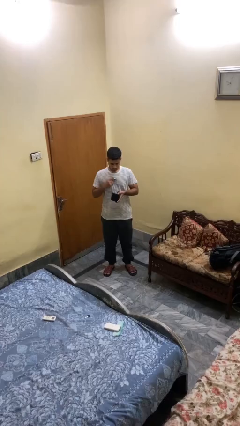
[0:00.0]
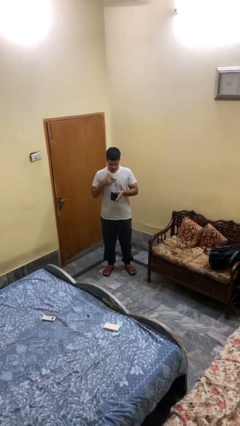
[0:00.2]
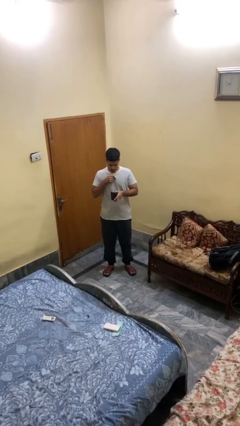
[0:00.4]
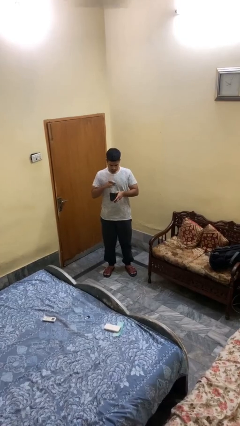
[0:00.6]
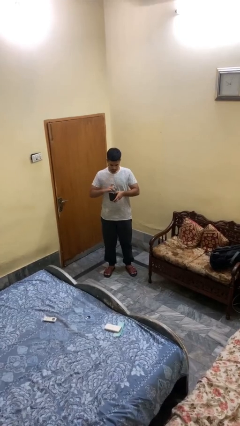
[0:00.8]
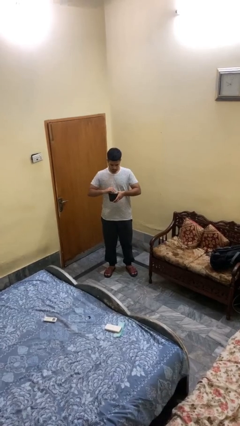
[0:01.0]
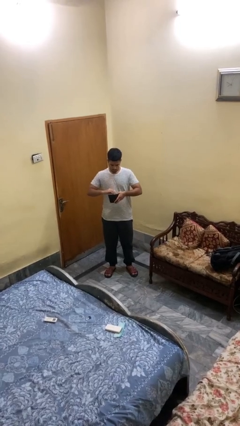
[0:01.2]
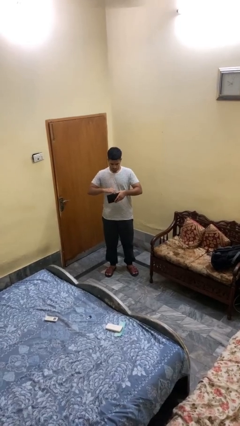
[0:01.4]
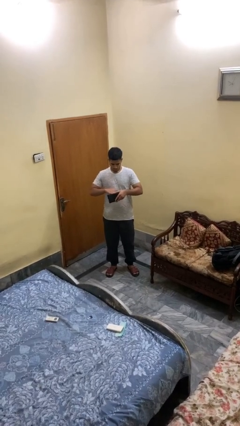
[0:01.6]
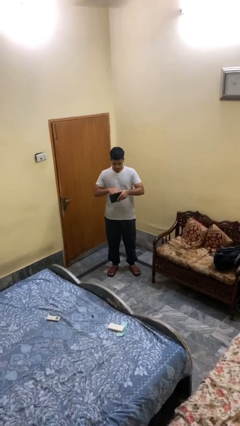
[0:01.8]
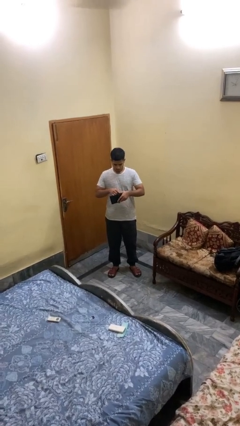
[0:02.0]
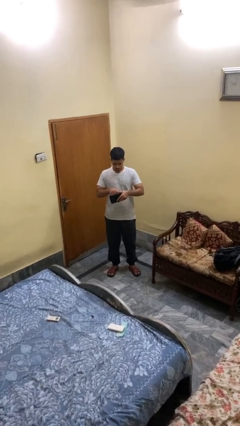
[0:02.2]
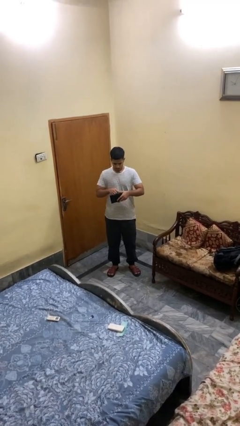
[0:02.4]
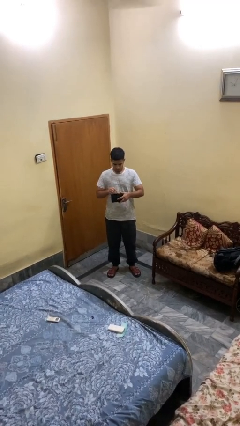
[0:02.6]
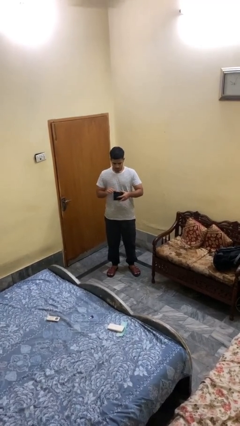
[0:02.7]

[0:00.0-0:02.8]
person puts object into purse

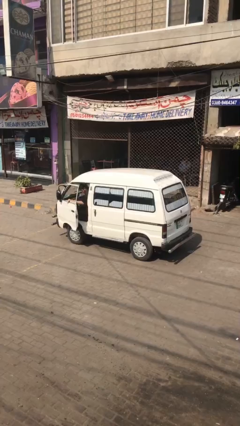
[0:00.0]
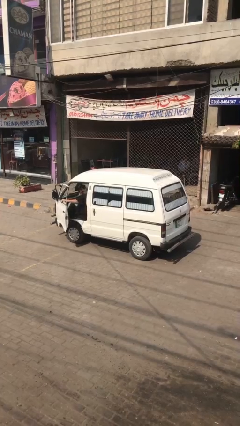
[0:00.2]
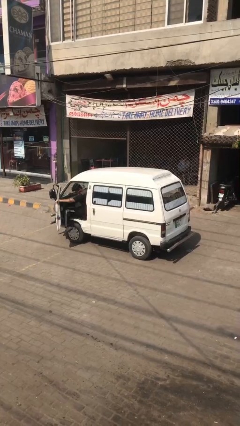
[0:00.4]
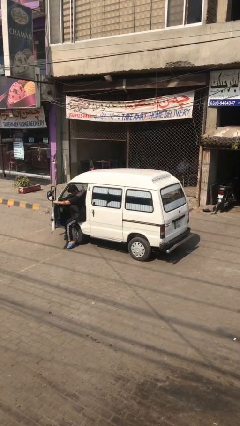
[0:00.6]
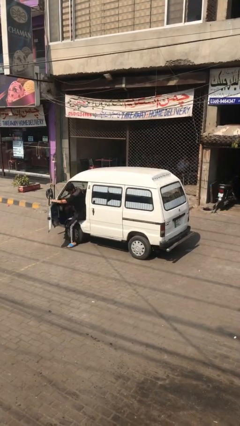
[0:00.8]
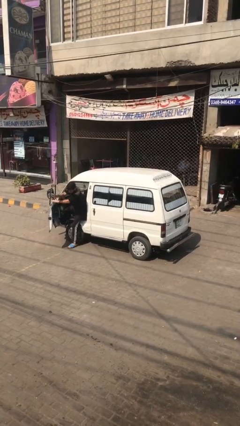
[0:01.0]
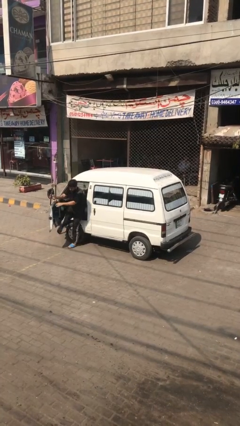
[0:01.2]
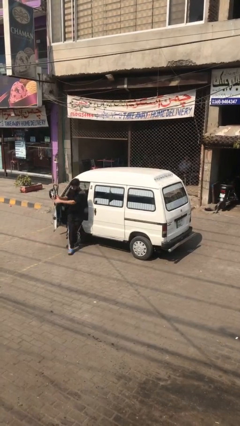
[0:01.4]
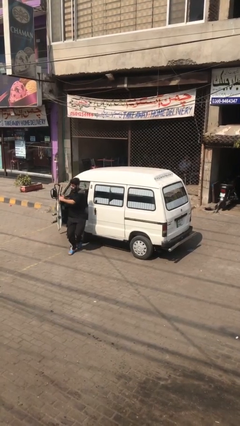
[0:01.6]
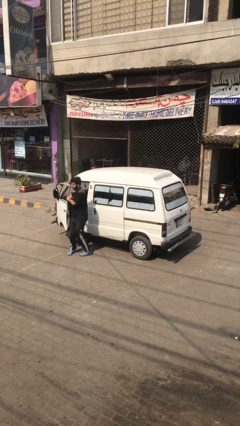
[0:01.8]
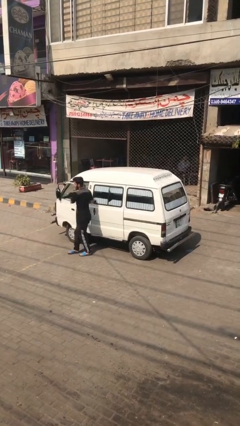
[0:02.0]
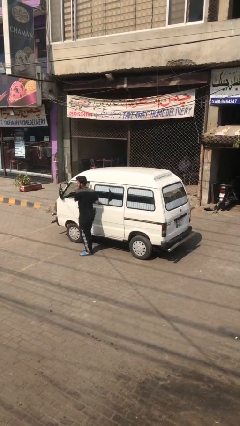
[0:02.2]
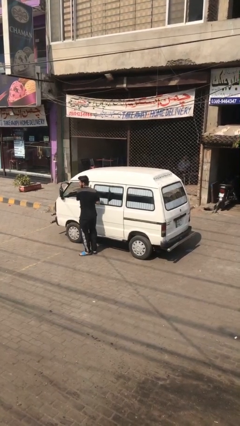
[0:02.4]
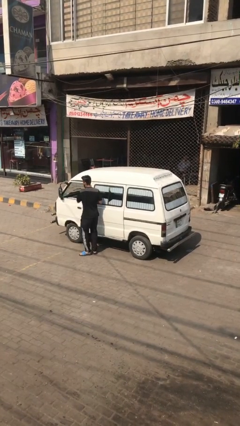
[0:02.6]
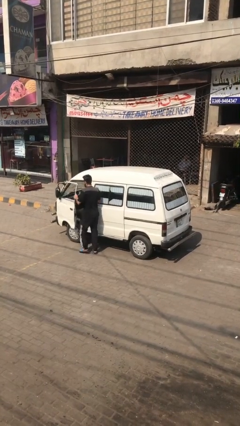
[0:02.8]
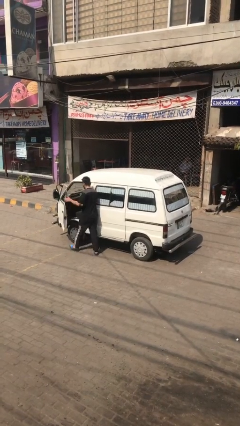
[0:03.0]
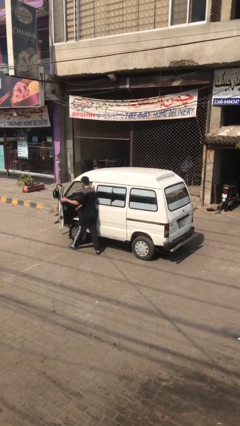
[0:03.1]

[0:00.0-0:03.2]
car drops off person

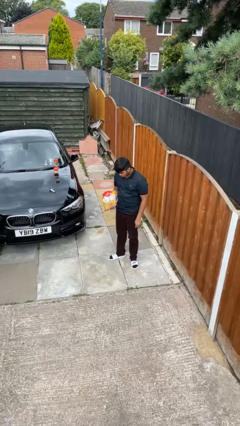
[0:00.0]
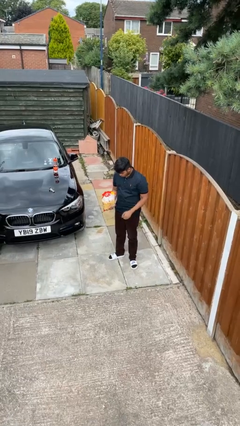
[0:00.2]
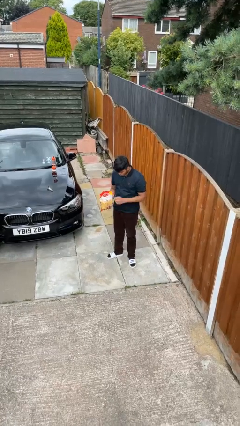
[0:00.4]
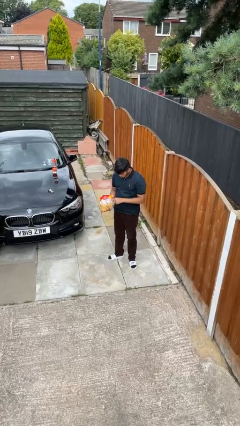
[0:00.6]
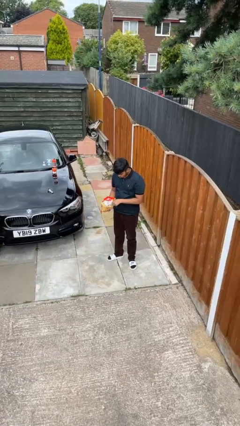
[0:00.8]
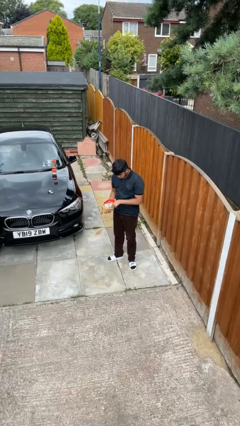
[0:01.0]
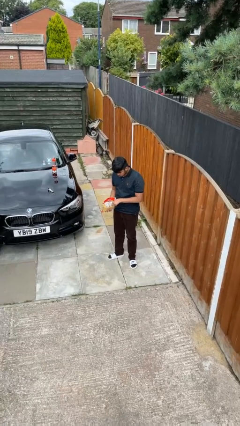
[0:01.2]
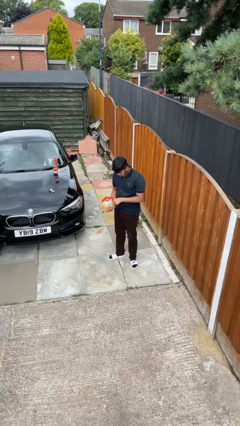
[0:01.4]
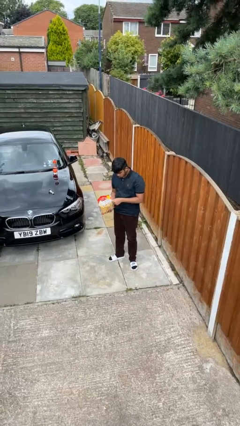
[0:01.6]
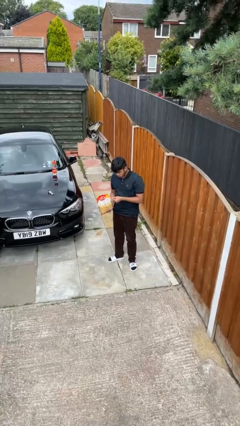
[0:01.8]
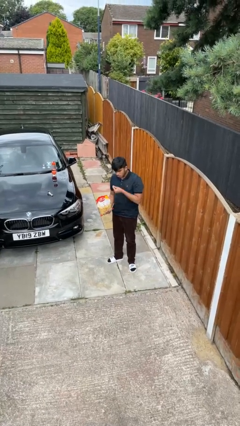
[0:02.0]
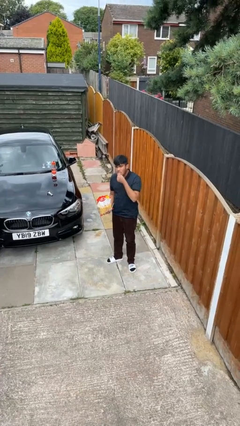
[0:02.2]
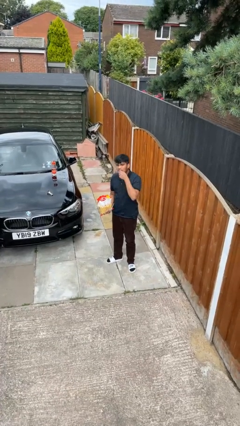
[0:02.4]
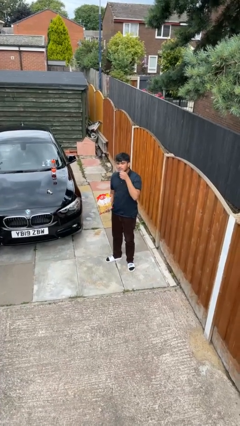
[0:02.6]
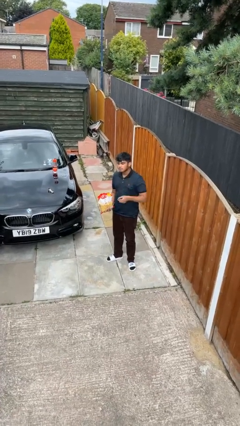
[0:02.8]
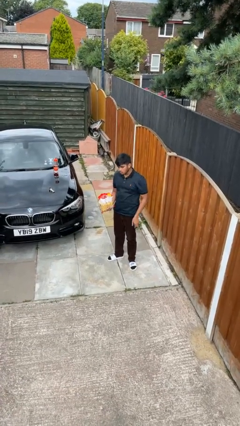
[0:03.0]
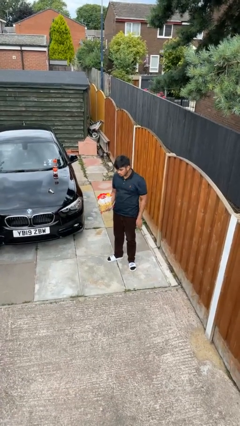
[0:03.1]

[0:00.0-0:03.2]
person eats snack from bag

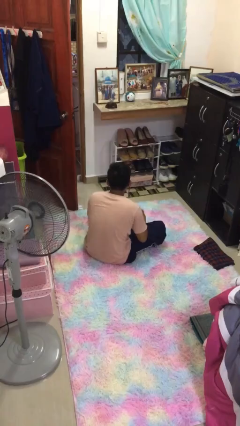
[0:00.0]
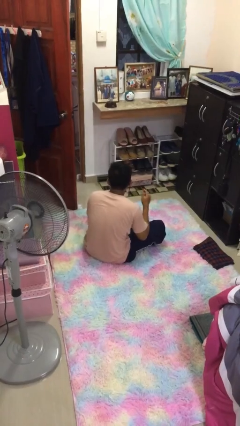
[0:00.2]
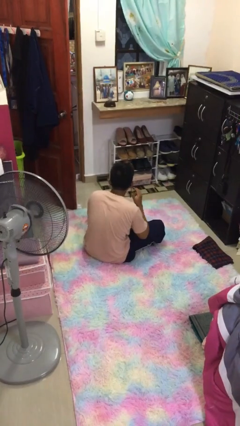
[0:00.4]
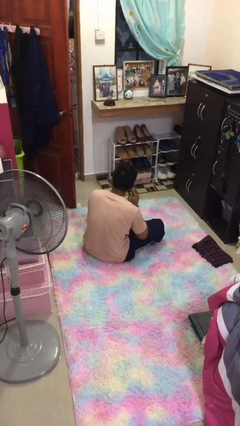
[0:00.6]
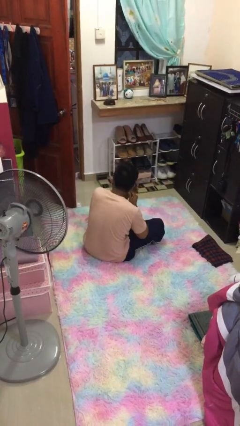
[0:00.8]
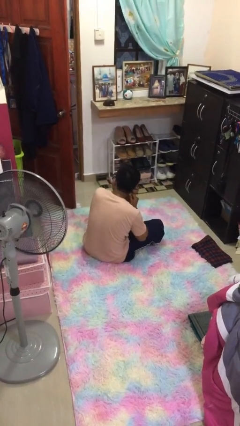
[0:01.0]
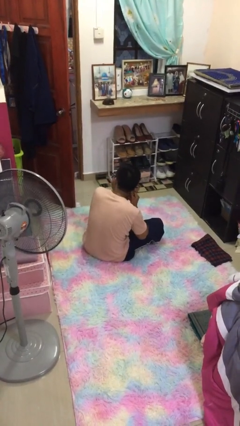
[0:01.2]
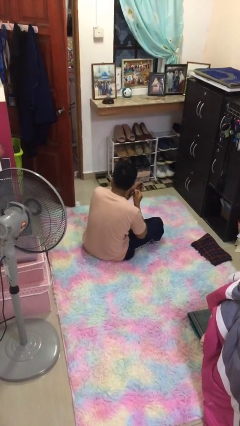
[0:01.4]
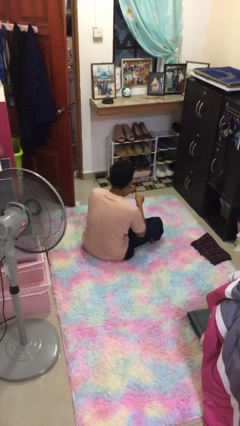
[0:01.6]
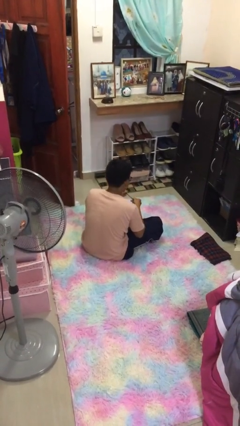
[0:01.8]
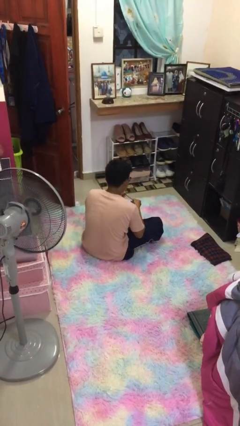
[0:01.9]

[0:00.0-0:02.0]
person takes off earrings

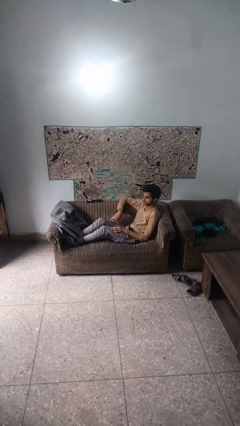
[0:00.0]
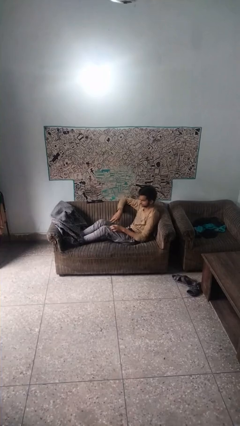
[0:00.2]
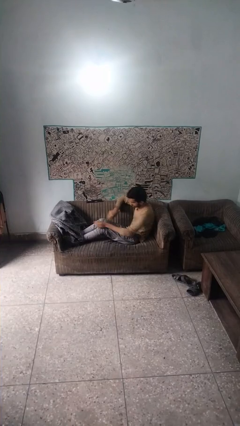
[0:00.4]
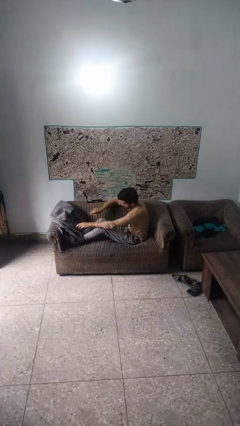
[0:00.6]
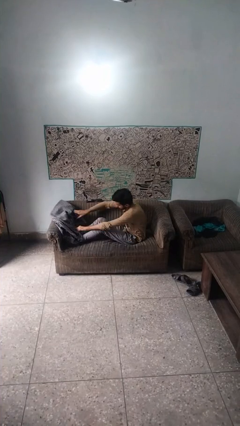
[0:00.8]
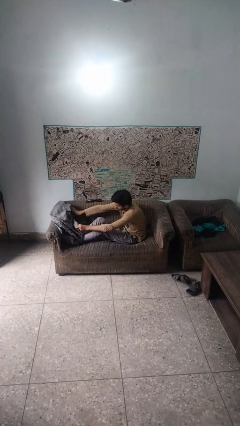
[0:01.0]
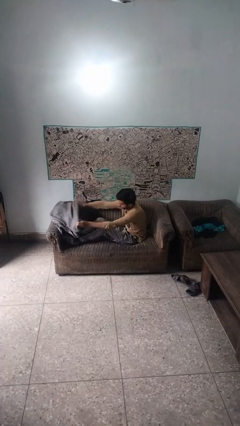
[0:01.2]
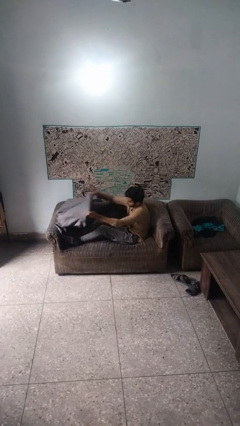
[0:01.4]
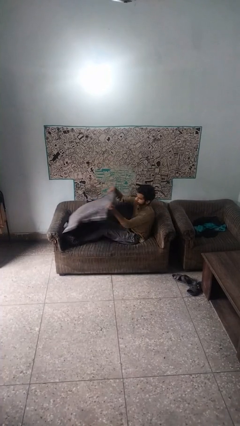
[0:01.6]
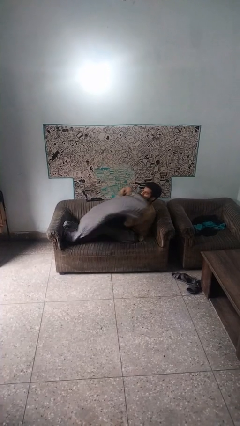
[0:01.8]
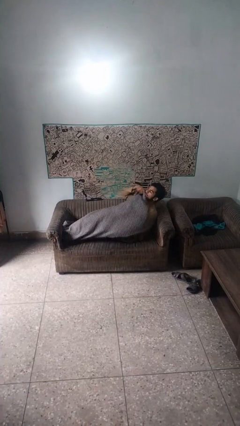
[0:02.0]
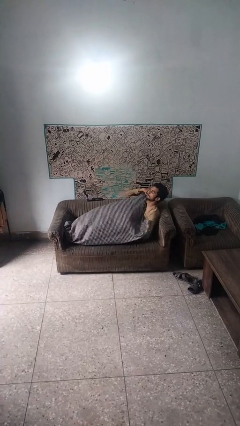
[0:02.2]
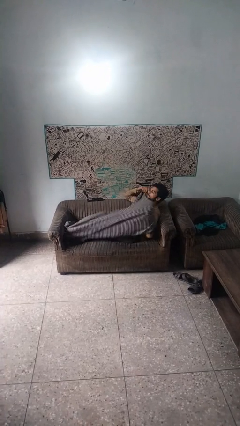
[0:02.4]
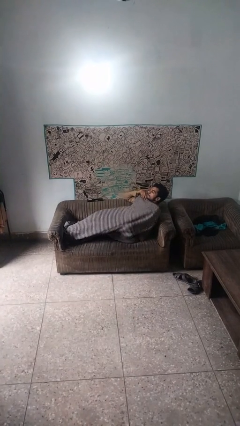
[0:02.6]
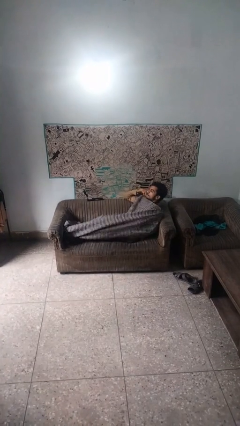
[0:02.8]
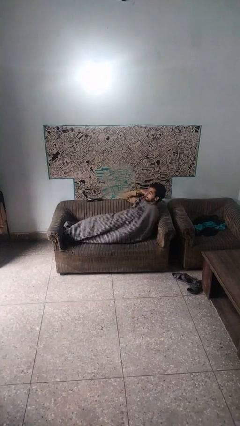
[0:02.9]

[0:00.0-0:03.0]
person covers with blanket

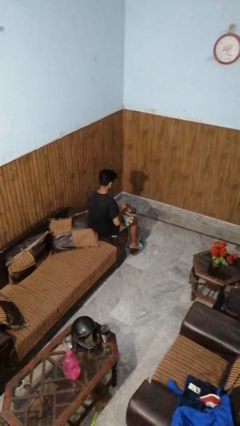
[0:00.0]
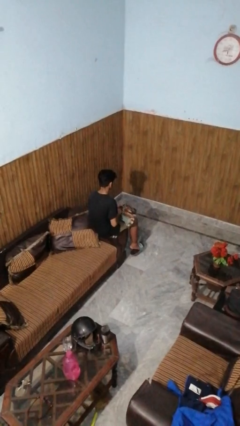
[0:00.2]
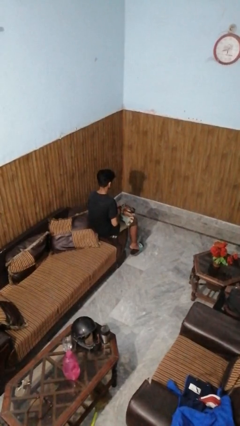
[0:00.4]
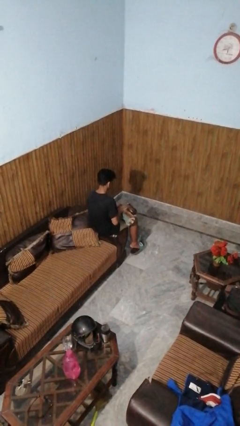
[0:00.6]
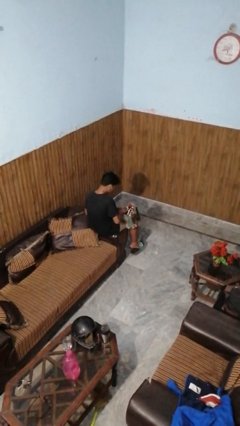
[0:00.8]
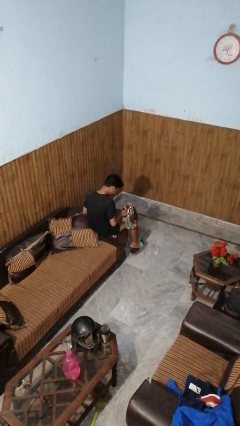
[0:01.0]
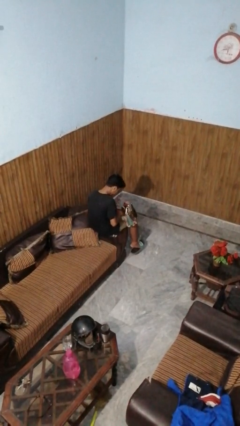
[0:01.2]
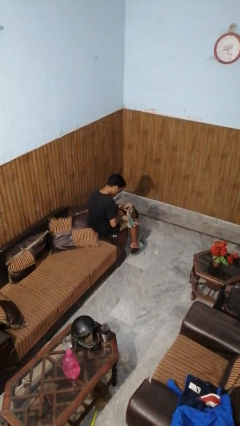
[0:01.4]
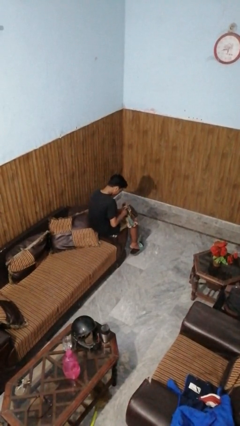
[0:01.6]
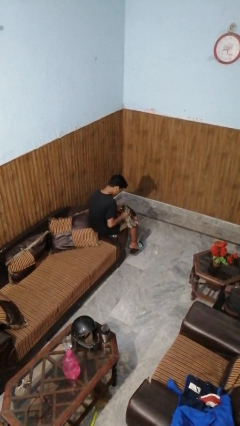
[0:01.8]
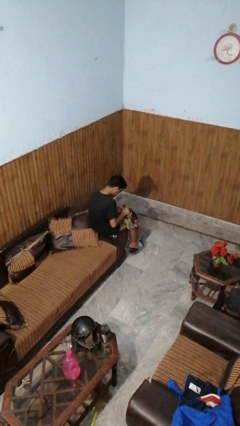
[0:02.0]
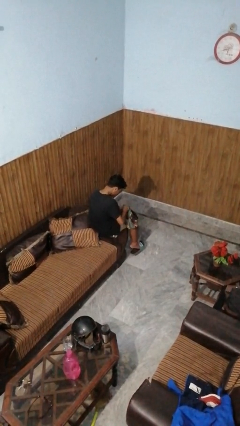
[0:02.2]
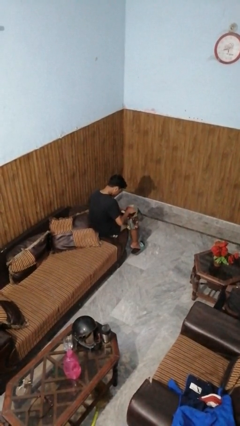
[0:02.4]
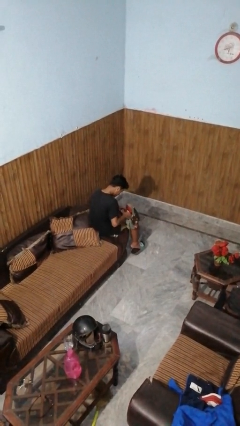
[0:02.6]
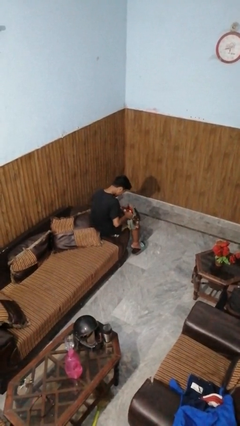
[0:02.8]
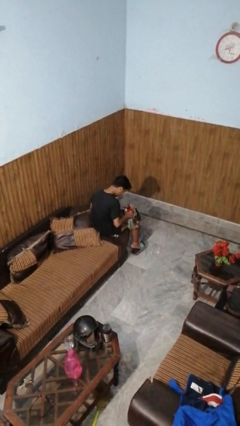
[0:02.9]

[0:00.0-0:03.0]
person searches in purse
